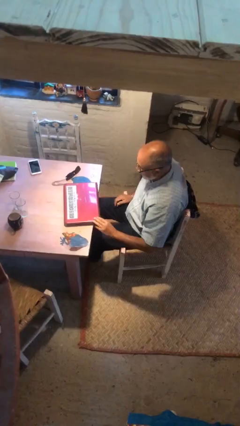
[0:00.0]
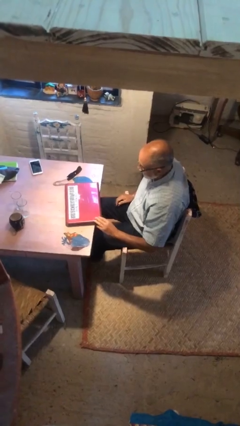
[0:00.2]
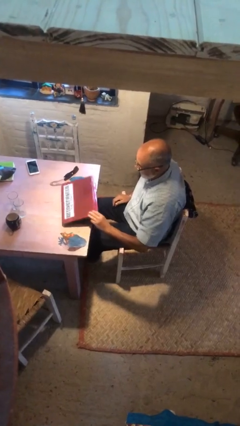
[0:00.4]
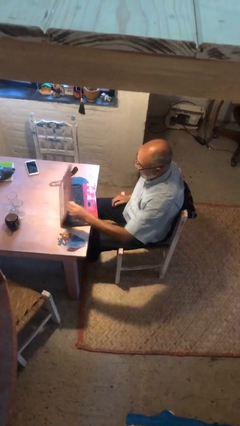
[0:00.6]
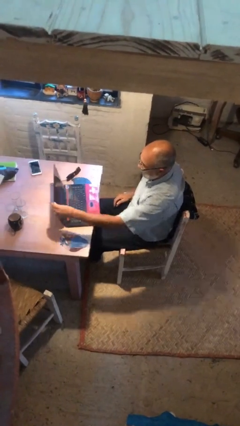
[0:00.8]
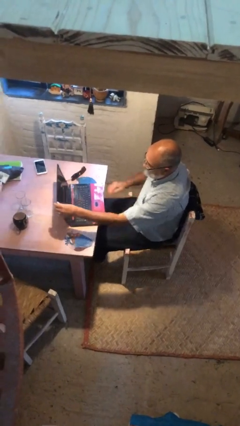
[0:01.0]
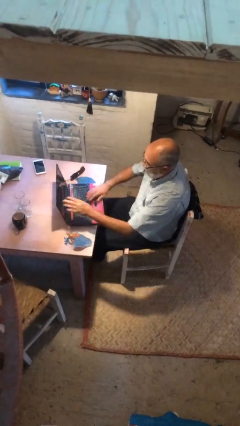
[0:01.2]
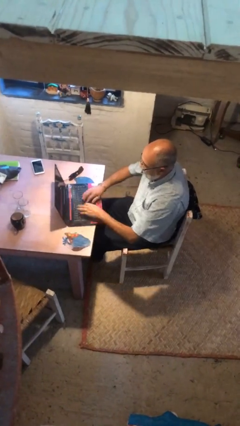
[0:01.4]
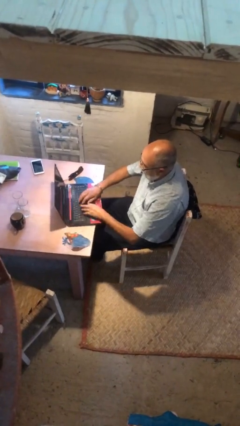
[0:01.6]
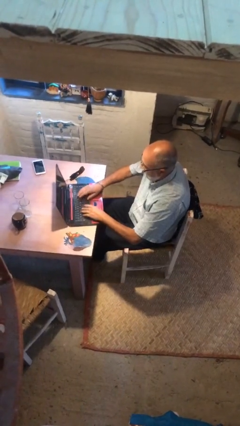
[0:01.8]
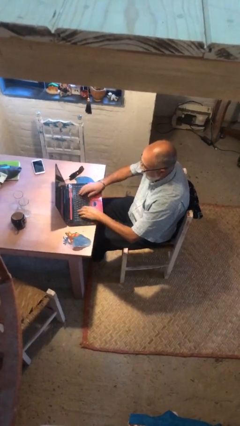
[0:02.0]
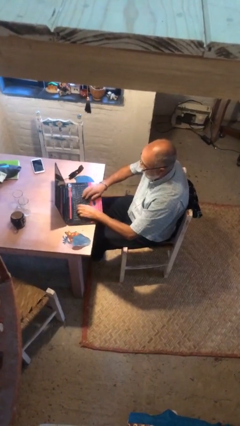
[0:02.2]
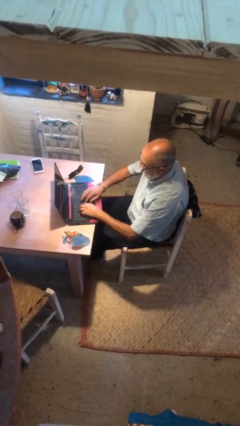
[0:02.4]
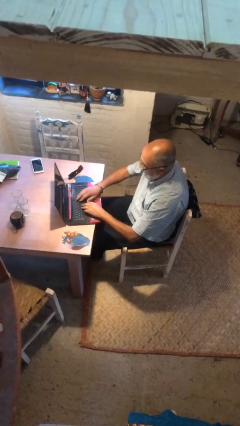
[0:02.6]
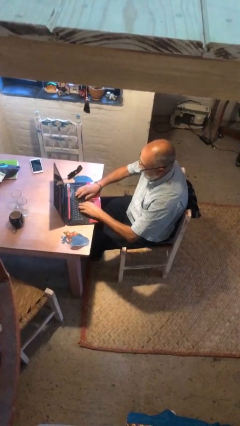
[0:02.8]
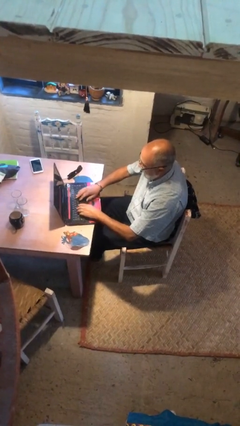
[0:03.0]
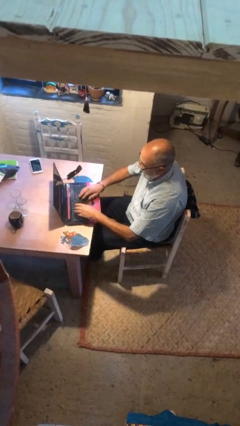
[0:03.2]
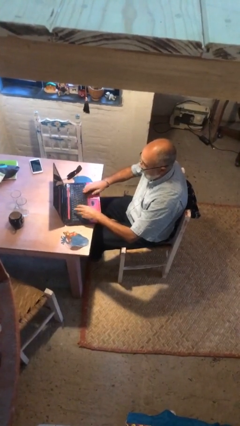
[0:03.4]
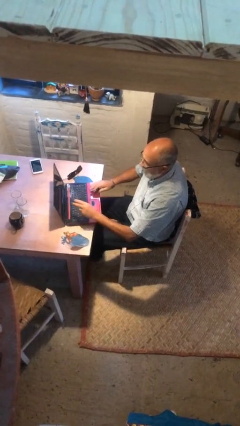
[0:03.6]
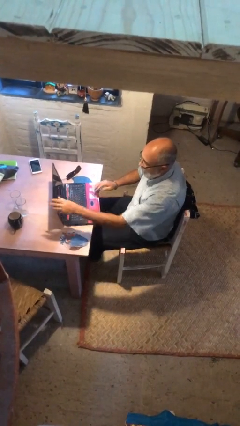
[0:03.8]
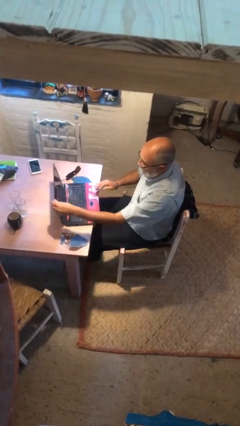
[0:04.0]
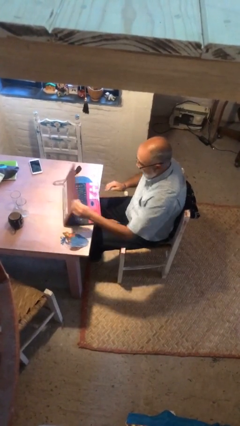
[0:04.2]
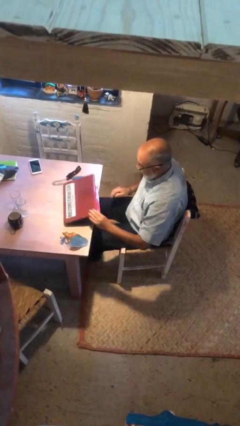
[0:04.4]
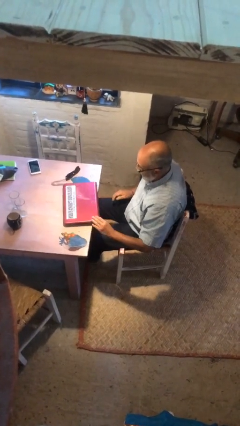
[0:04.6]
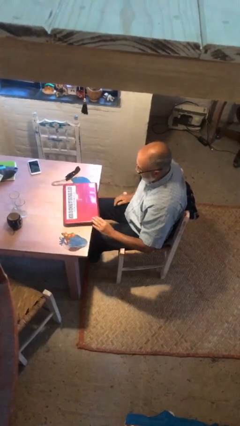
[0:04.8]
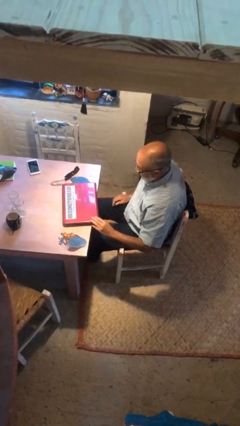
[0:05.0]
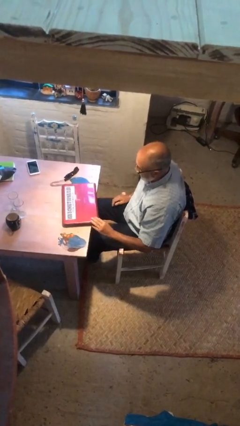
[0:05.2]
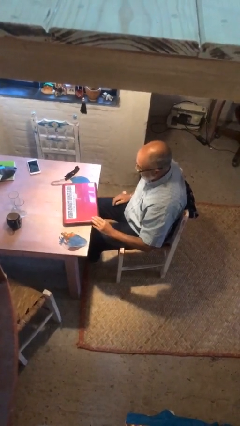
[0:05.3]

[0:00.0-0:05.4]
person interacts with laptop

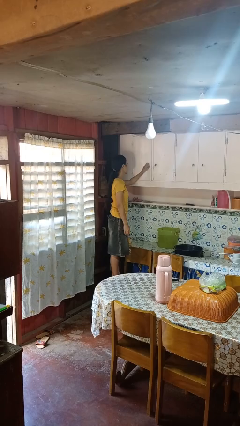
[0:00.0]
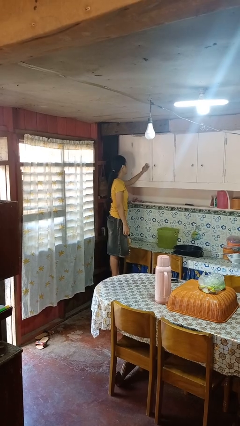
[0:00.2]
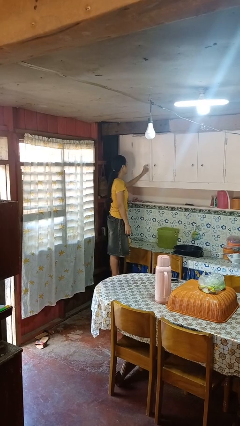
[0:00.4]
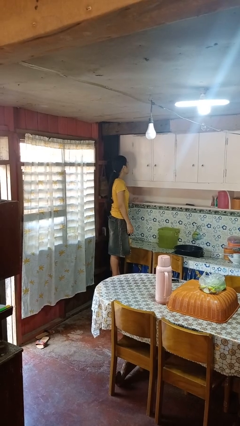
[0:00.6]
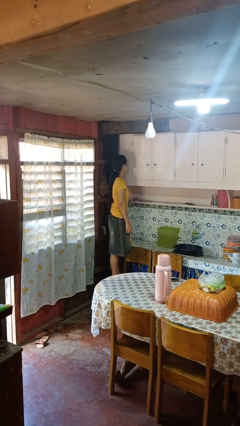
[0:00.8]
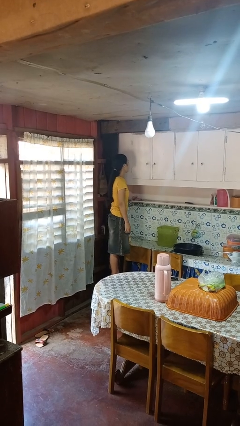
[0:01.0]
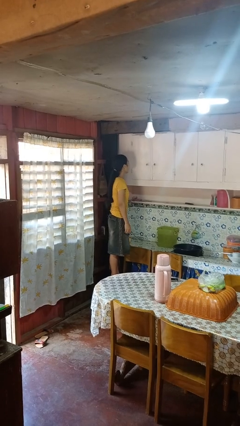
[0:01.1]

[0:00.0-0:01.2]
person closes cabinet

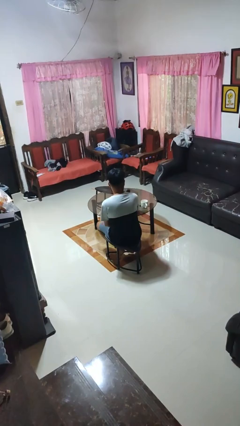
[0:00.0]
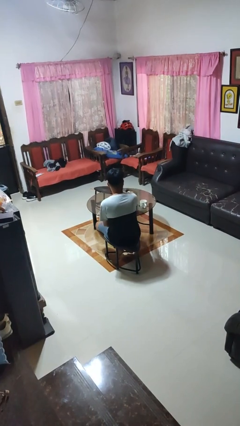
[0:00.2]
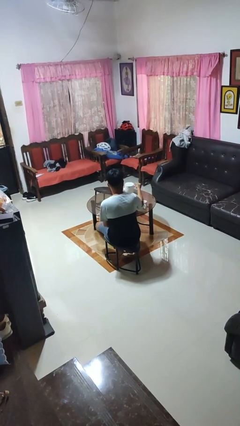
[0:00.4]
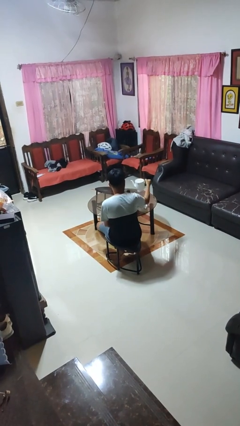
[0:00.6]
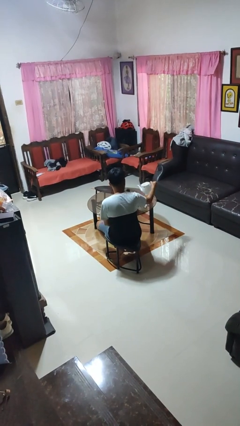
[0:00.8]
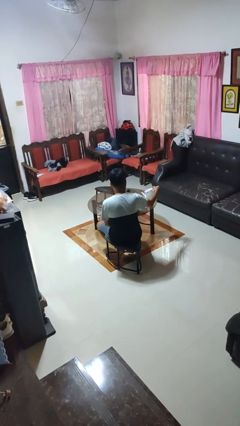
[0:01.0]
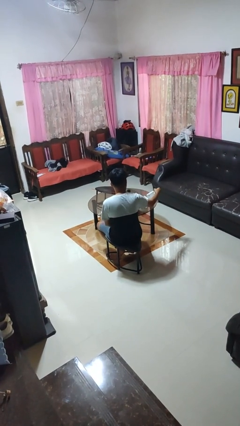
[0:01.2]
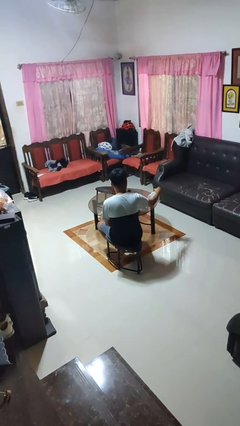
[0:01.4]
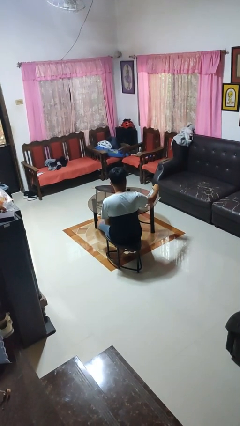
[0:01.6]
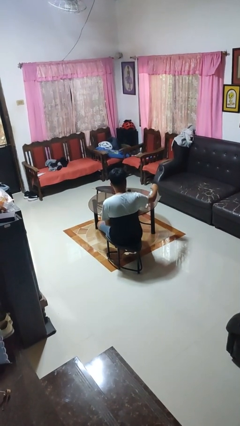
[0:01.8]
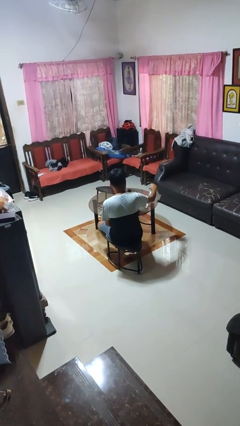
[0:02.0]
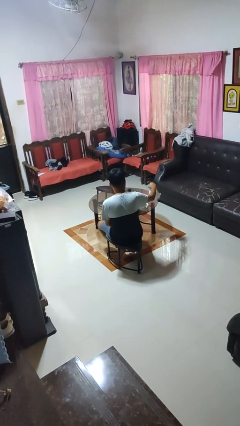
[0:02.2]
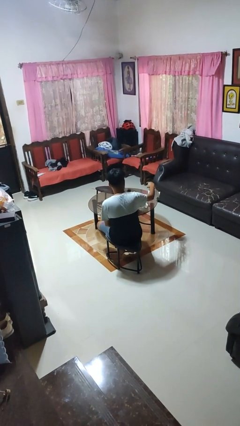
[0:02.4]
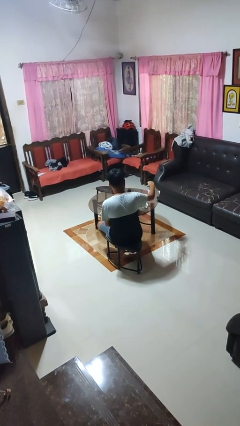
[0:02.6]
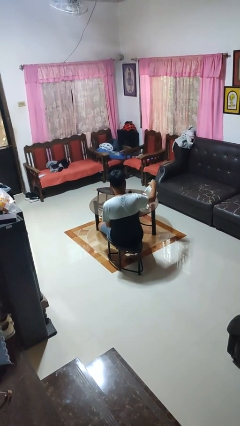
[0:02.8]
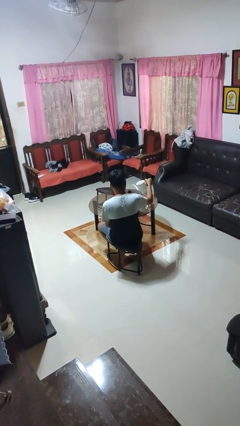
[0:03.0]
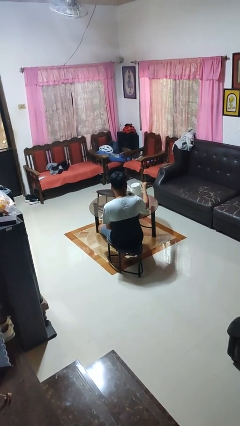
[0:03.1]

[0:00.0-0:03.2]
person pours coffee into mug

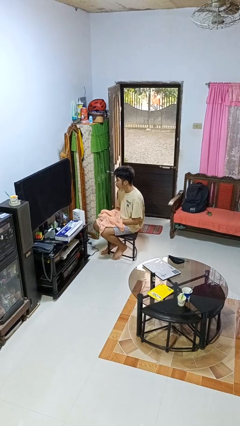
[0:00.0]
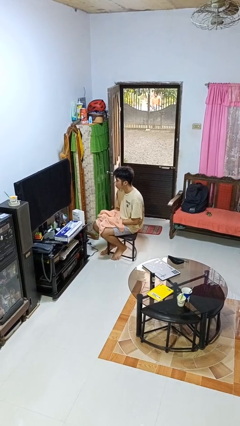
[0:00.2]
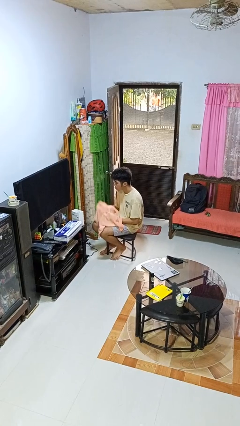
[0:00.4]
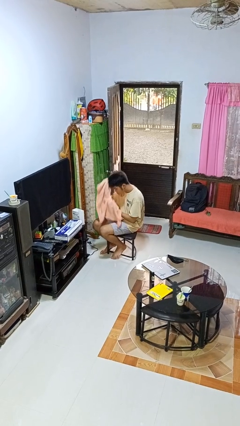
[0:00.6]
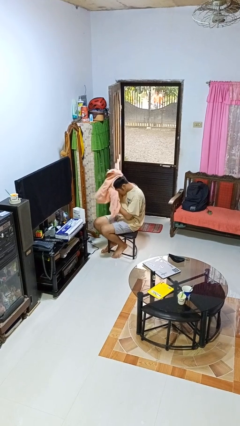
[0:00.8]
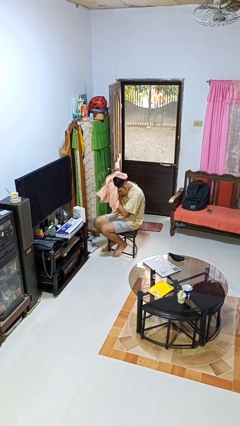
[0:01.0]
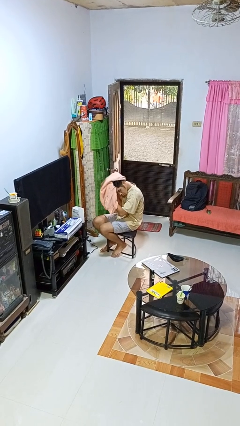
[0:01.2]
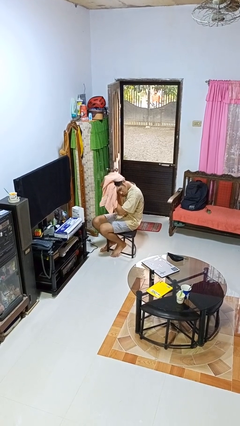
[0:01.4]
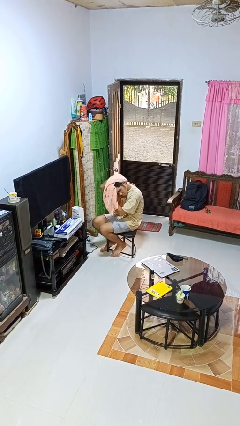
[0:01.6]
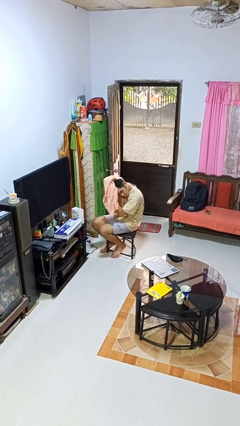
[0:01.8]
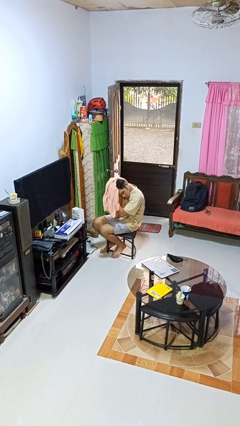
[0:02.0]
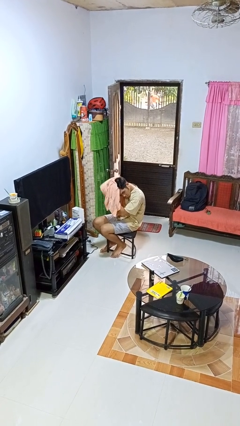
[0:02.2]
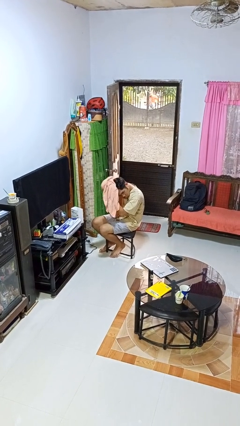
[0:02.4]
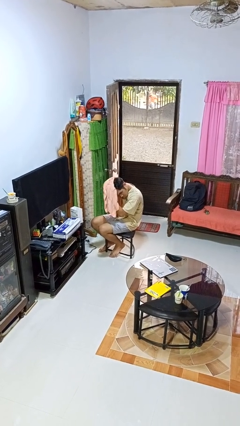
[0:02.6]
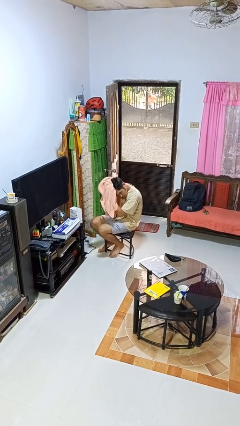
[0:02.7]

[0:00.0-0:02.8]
person dries hair with towel

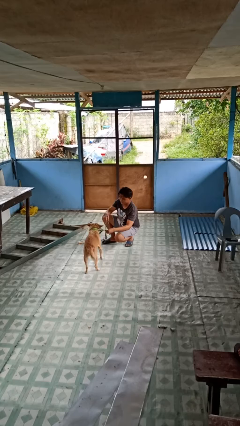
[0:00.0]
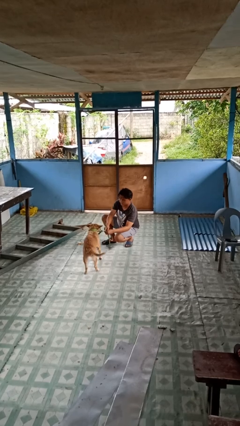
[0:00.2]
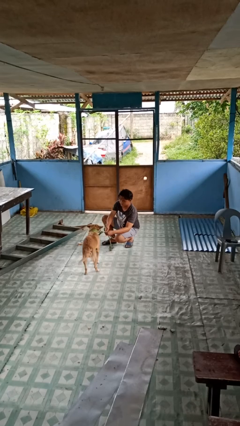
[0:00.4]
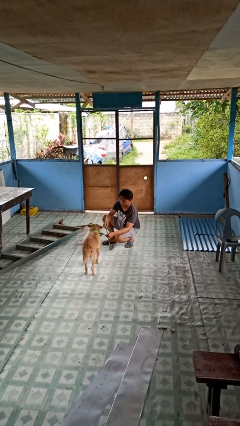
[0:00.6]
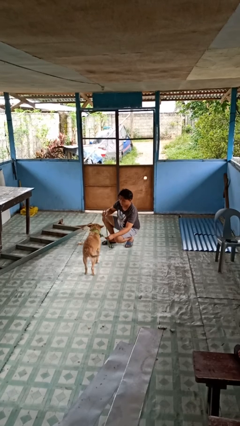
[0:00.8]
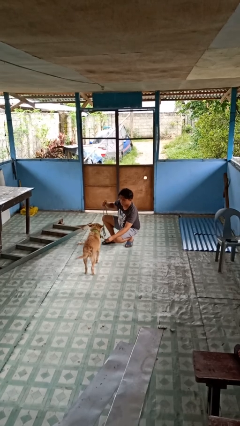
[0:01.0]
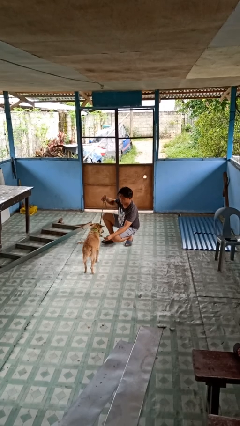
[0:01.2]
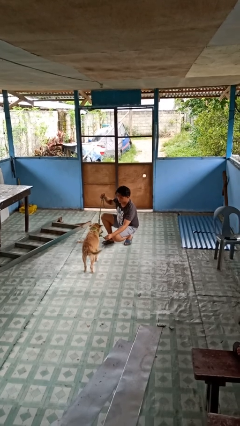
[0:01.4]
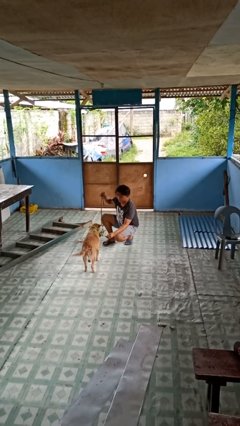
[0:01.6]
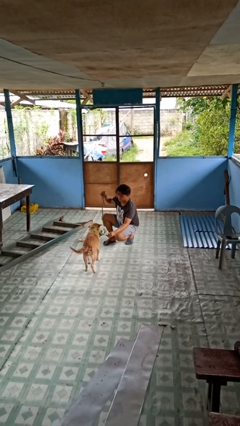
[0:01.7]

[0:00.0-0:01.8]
person unattaches leash from dog

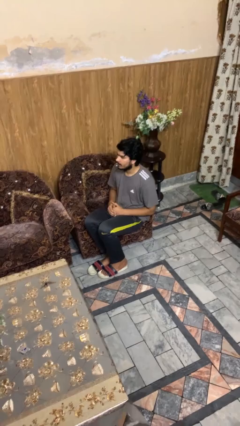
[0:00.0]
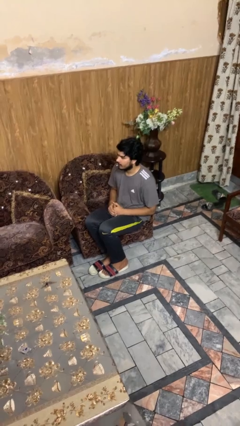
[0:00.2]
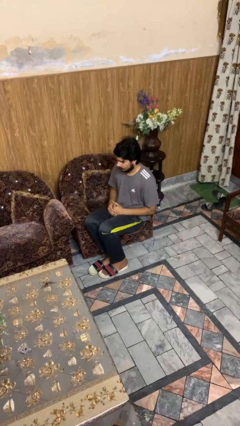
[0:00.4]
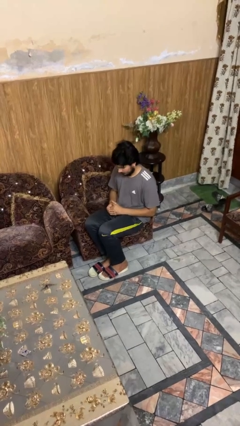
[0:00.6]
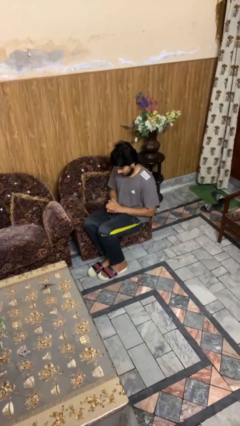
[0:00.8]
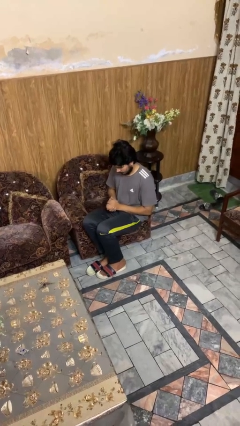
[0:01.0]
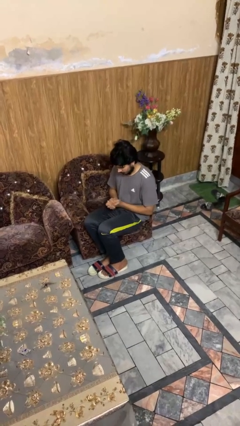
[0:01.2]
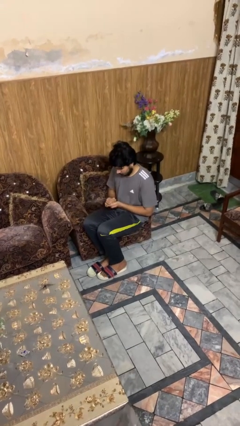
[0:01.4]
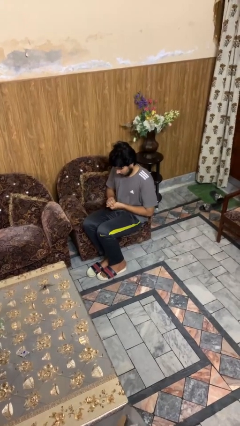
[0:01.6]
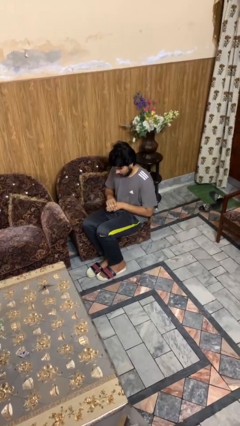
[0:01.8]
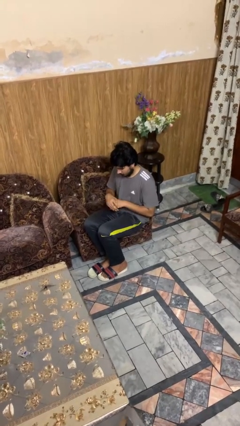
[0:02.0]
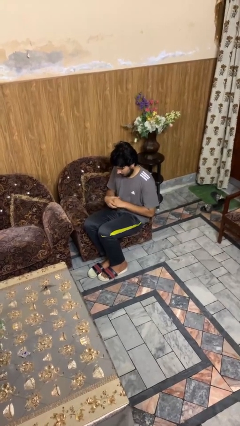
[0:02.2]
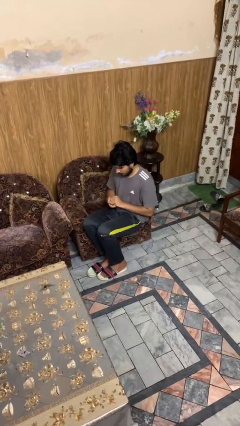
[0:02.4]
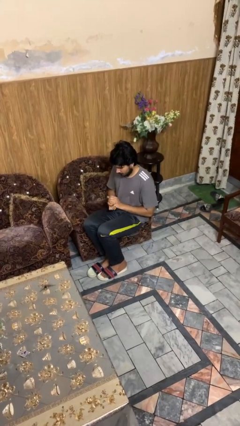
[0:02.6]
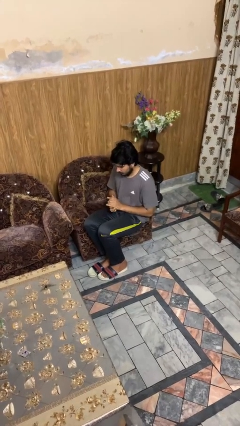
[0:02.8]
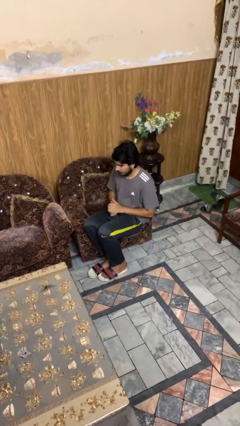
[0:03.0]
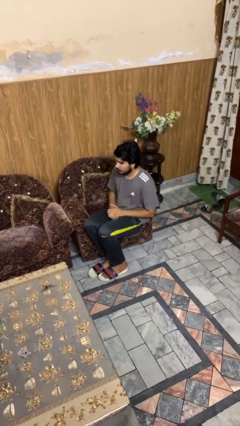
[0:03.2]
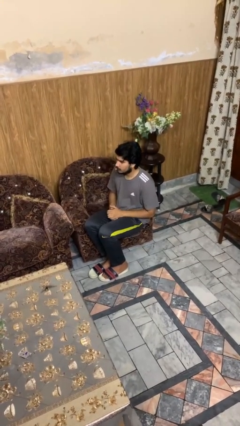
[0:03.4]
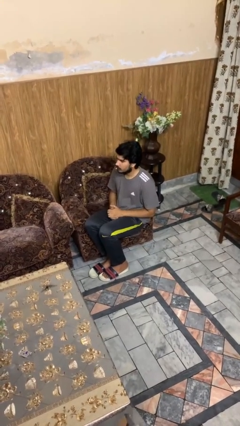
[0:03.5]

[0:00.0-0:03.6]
person looks at hands in lap
